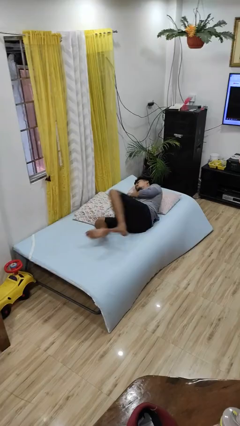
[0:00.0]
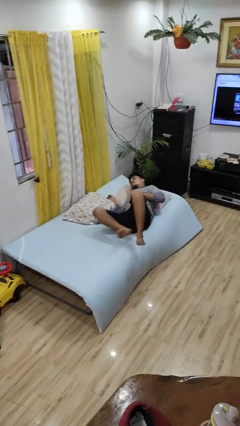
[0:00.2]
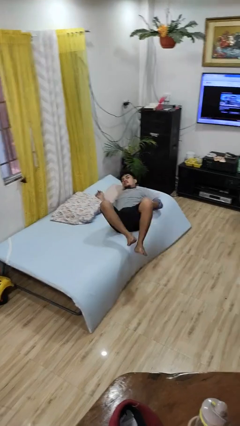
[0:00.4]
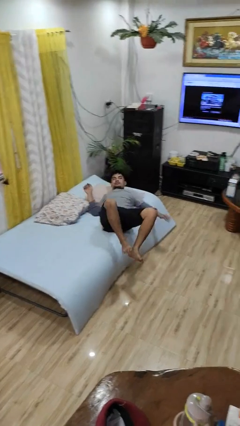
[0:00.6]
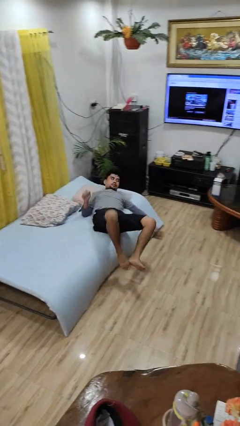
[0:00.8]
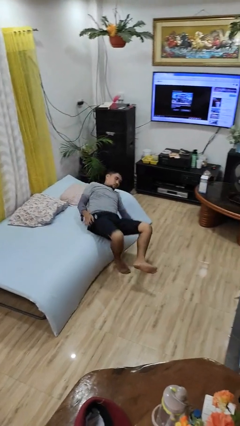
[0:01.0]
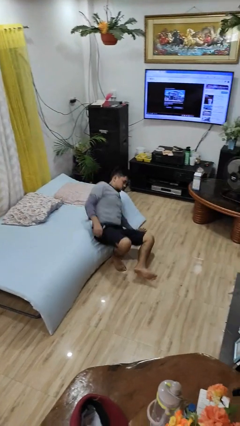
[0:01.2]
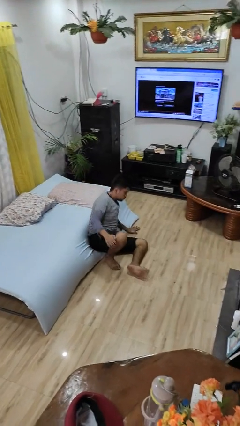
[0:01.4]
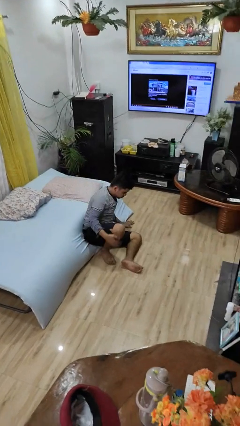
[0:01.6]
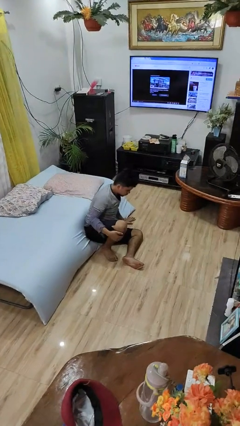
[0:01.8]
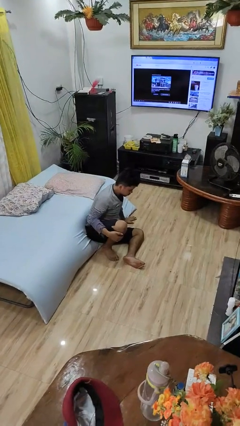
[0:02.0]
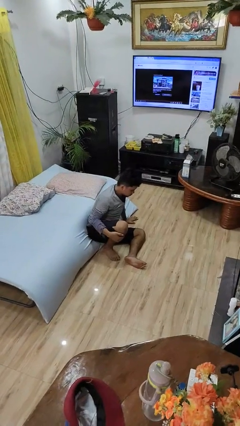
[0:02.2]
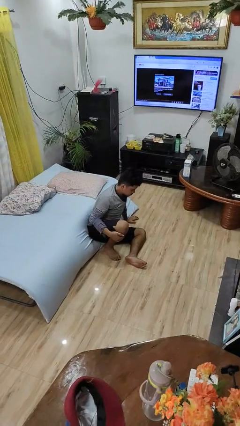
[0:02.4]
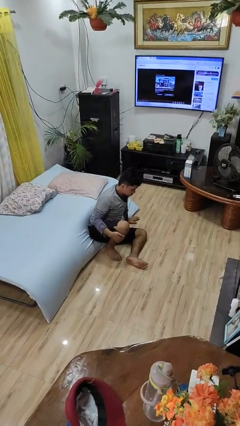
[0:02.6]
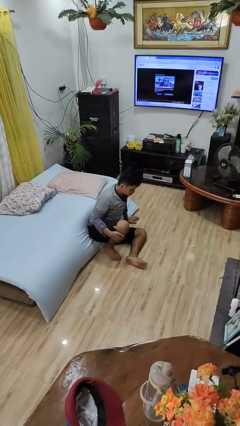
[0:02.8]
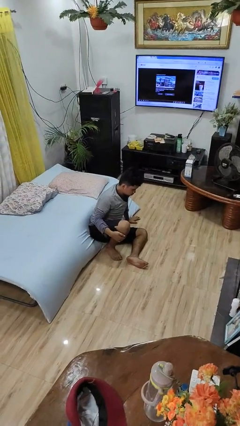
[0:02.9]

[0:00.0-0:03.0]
person falls from bed

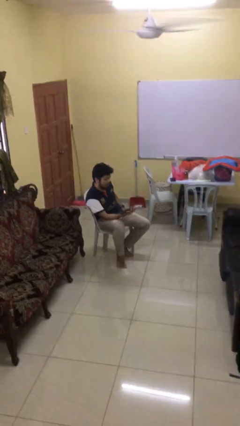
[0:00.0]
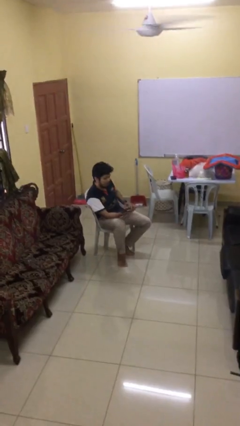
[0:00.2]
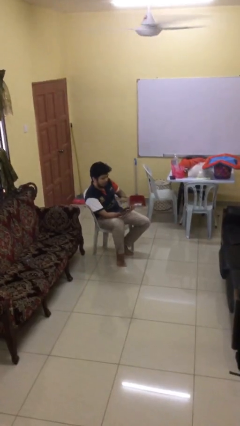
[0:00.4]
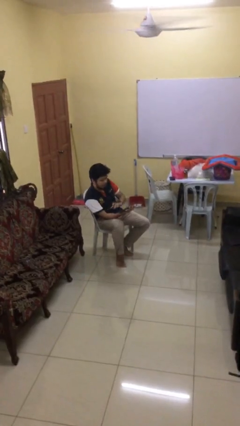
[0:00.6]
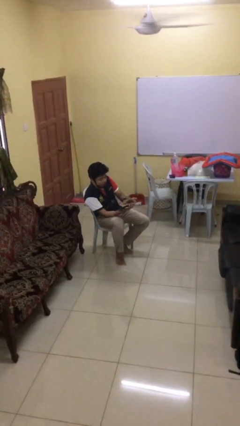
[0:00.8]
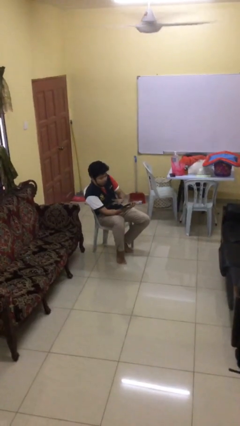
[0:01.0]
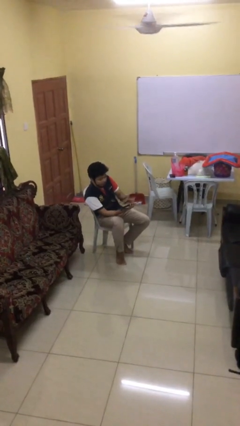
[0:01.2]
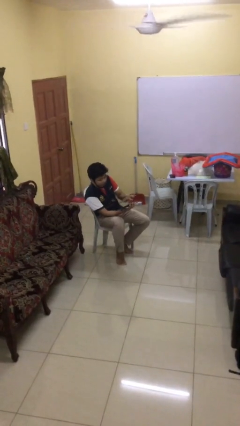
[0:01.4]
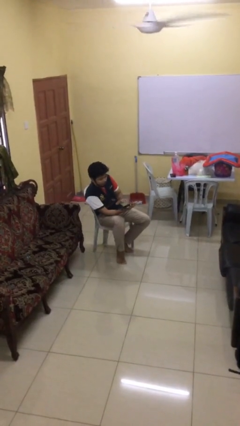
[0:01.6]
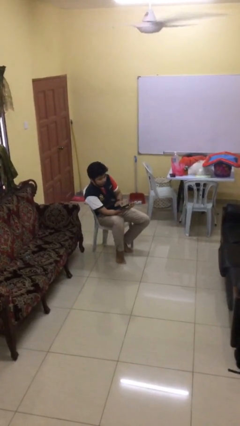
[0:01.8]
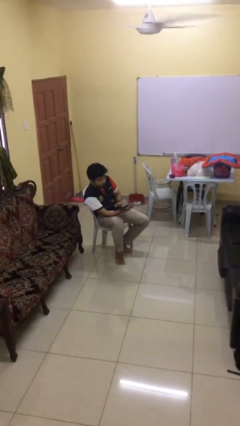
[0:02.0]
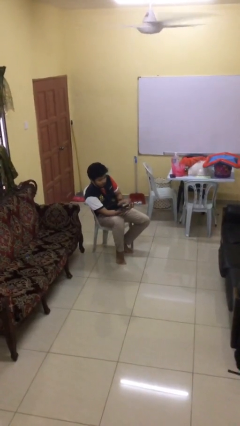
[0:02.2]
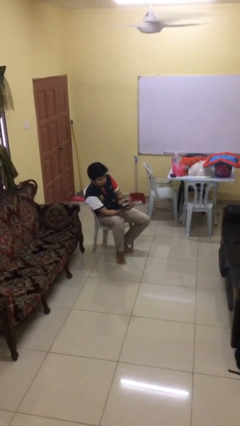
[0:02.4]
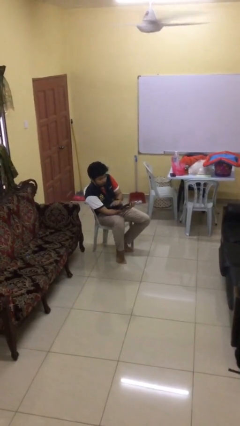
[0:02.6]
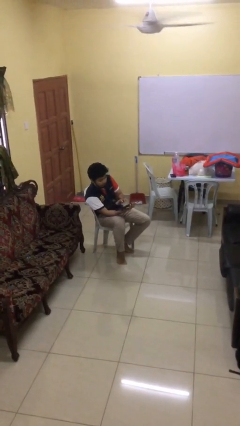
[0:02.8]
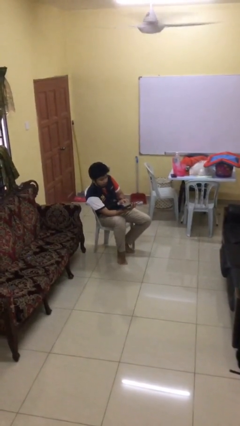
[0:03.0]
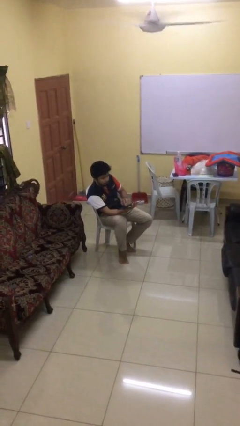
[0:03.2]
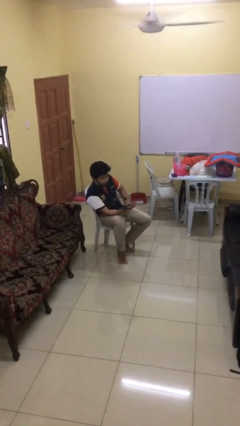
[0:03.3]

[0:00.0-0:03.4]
person interacts with tablet

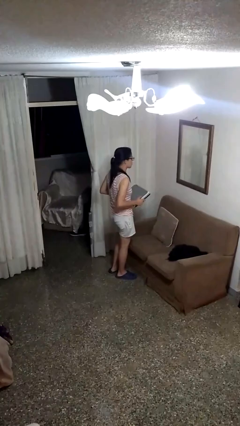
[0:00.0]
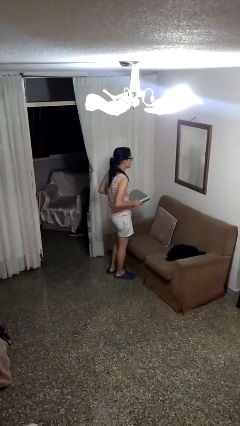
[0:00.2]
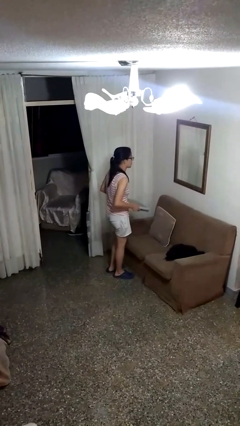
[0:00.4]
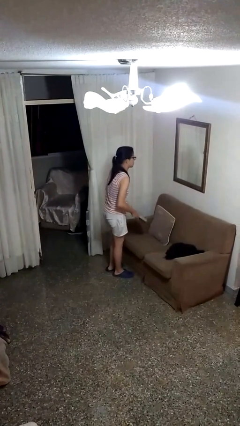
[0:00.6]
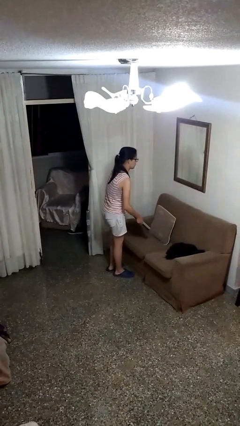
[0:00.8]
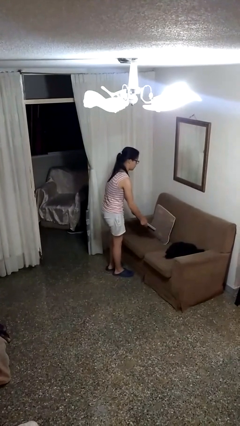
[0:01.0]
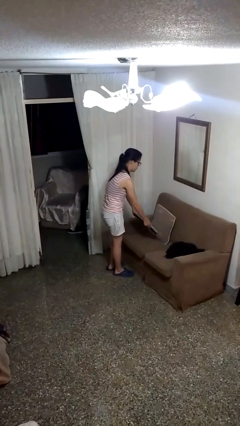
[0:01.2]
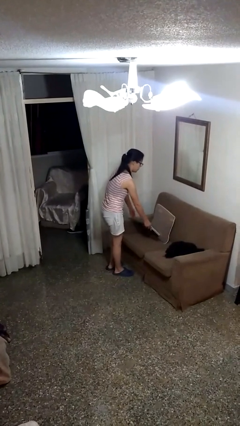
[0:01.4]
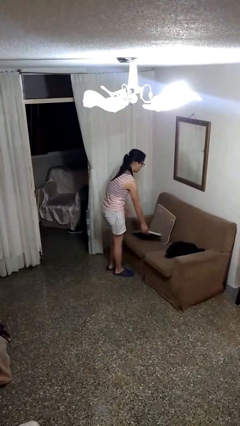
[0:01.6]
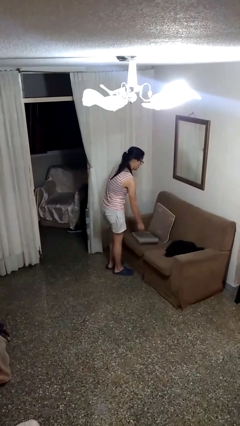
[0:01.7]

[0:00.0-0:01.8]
person puts down object on couch

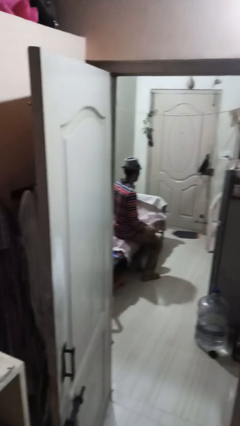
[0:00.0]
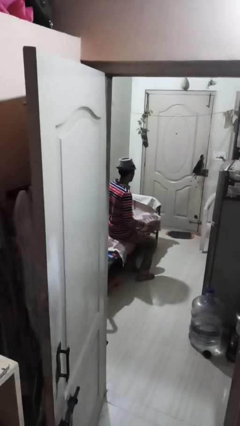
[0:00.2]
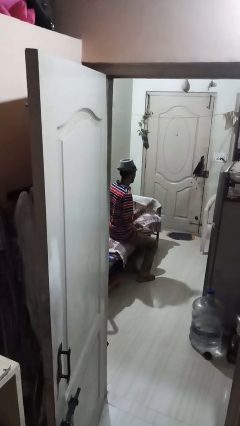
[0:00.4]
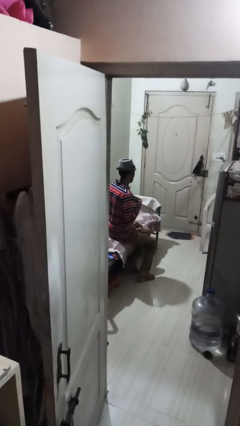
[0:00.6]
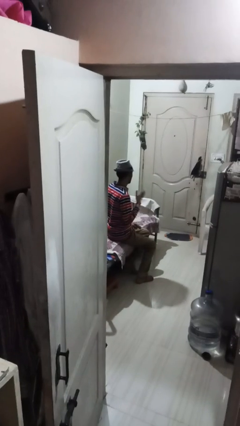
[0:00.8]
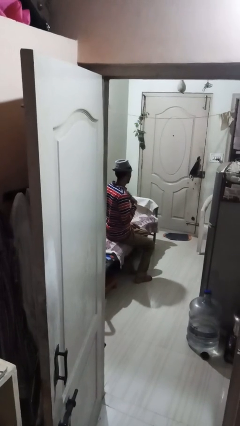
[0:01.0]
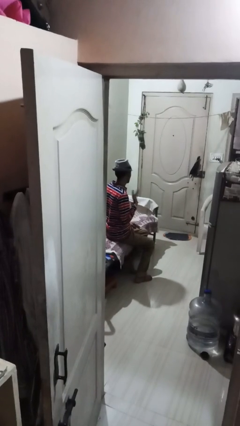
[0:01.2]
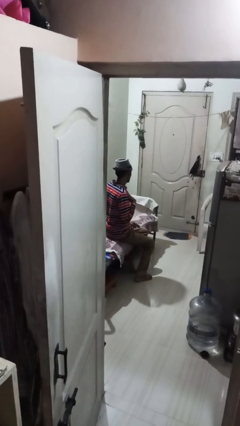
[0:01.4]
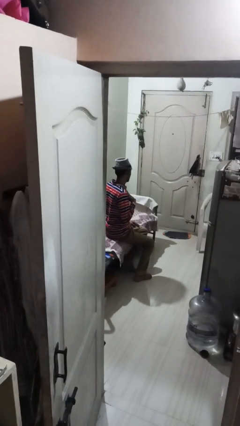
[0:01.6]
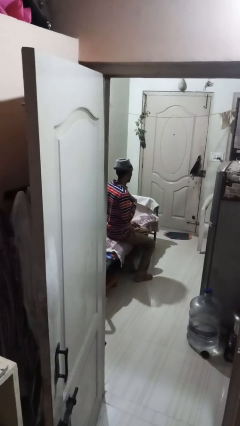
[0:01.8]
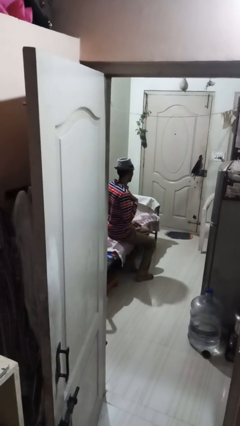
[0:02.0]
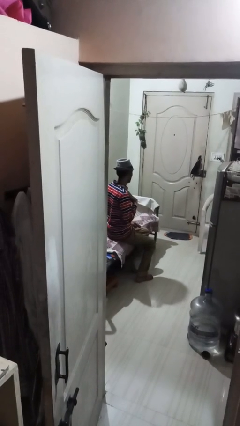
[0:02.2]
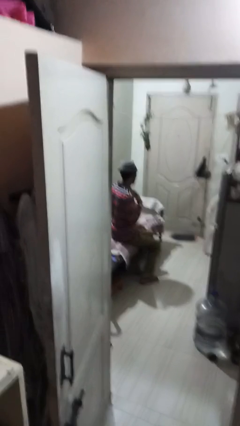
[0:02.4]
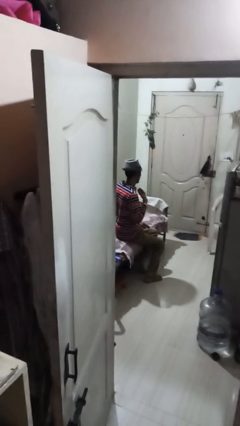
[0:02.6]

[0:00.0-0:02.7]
person drums on chest

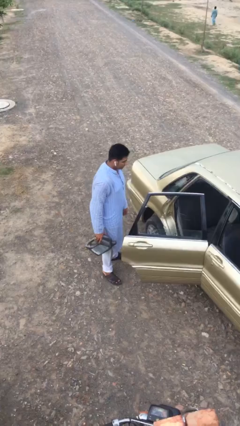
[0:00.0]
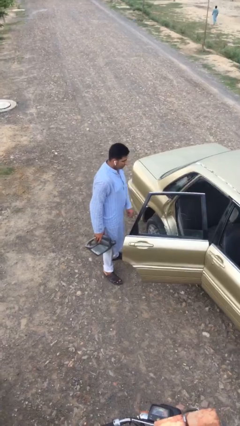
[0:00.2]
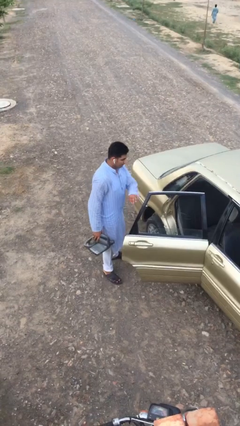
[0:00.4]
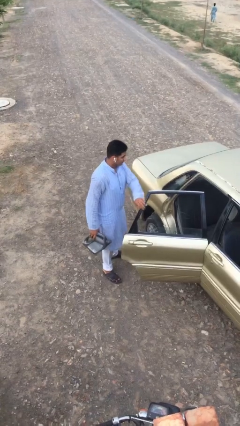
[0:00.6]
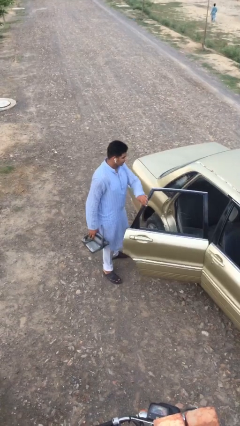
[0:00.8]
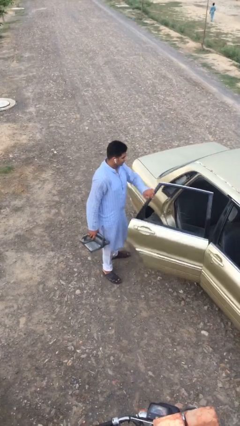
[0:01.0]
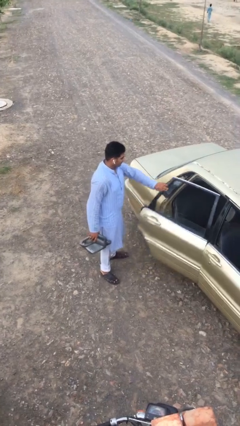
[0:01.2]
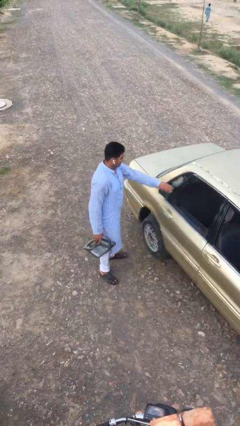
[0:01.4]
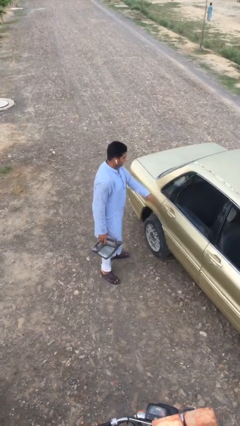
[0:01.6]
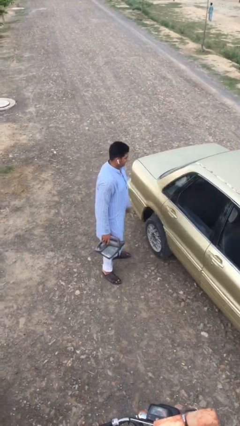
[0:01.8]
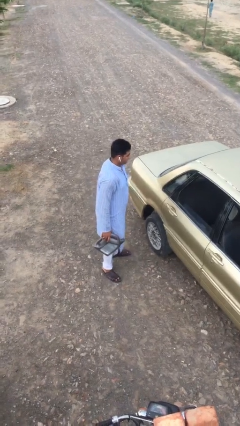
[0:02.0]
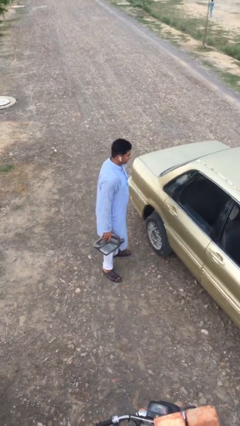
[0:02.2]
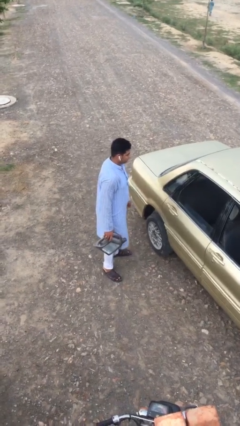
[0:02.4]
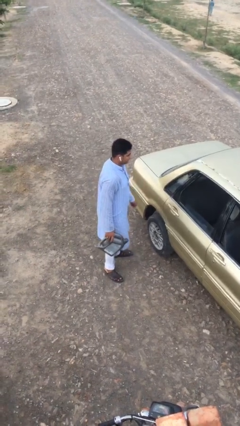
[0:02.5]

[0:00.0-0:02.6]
person closes car door

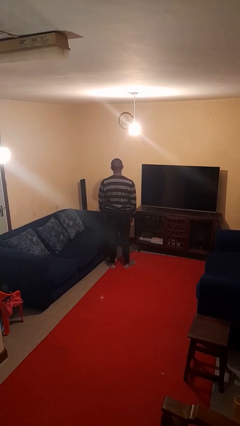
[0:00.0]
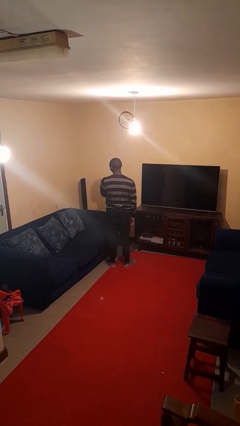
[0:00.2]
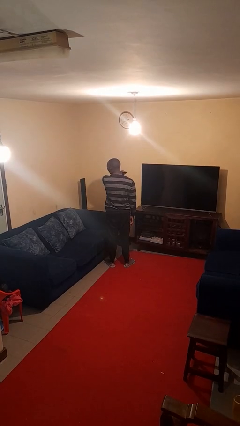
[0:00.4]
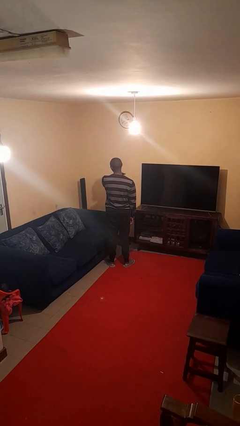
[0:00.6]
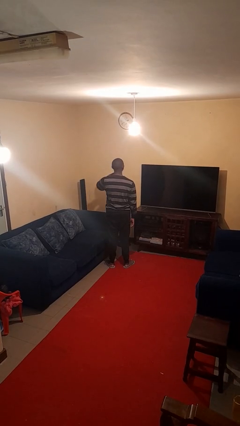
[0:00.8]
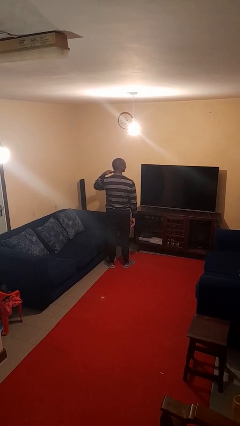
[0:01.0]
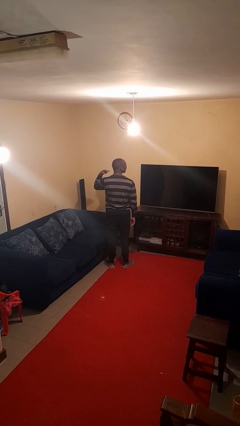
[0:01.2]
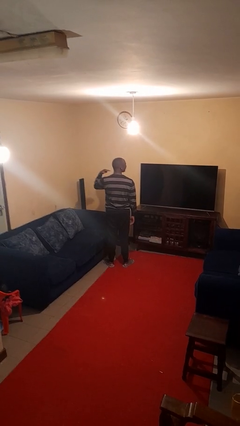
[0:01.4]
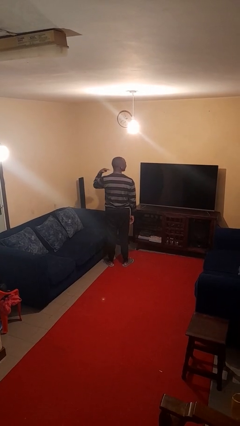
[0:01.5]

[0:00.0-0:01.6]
person gestures cut

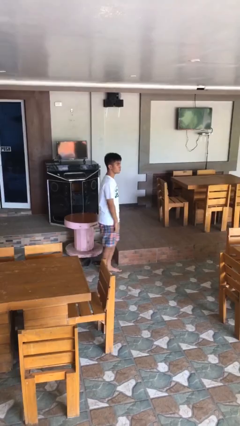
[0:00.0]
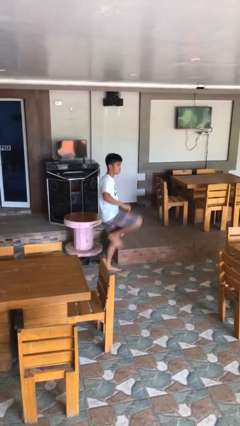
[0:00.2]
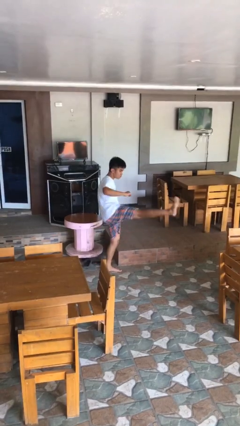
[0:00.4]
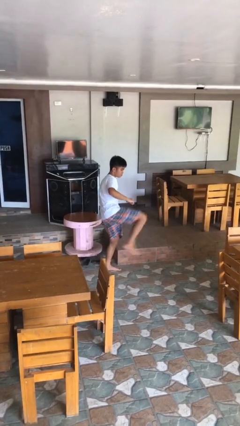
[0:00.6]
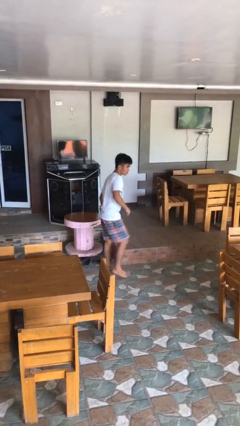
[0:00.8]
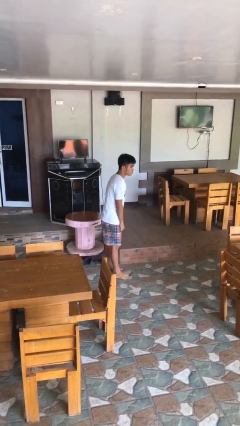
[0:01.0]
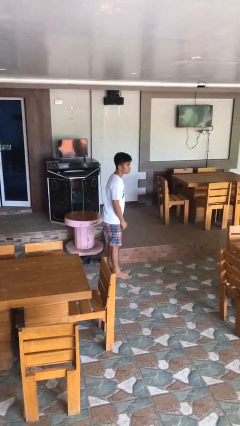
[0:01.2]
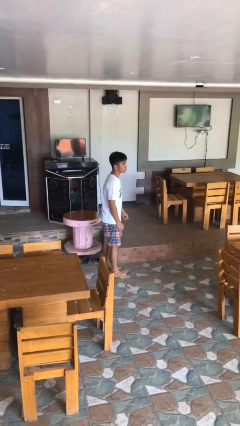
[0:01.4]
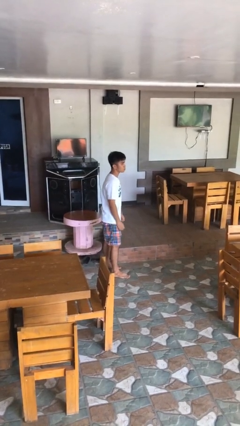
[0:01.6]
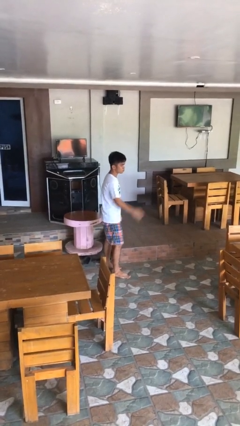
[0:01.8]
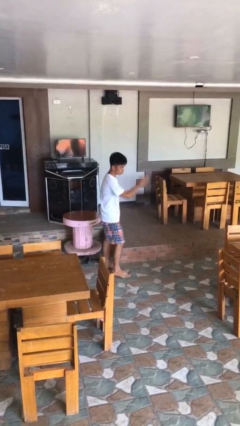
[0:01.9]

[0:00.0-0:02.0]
person karate kicks
